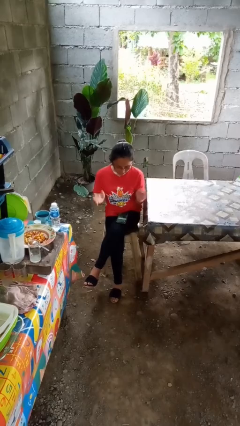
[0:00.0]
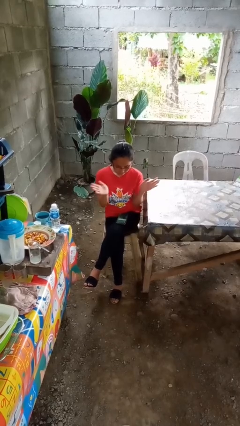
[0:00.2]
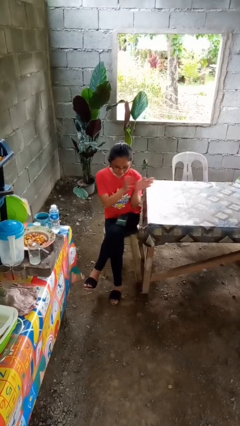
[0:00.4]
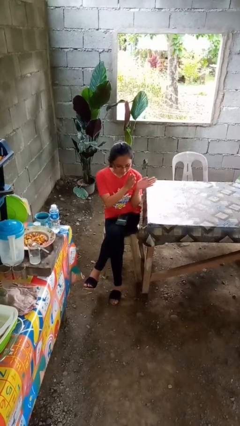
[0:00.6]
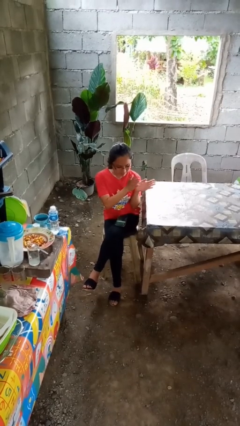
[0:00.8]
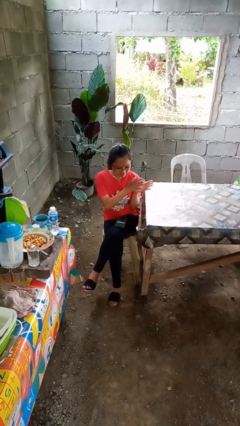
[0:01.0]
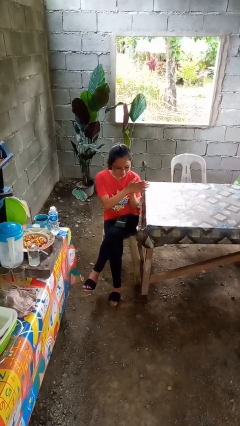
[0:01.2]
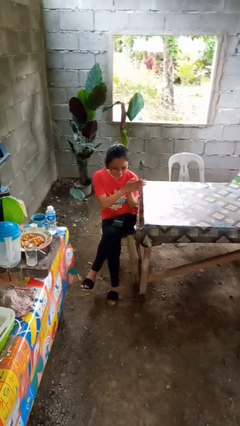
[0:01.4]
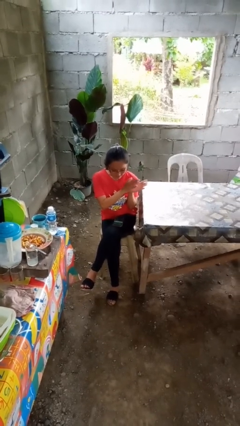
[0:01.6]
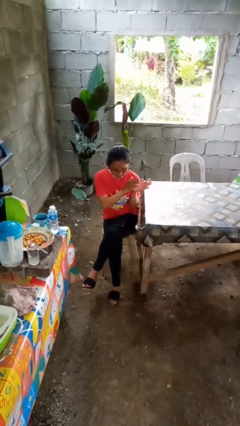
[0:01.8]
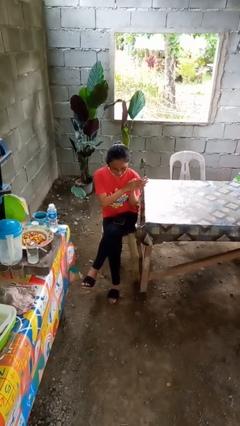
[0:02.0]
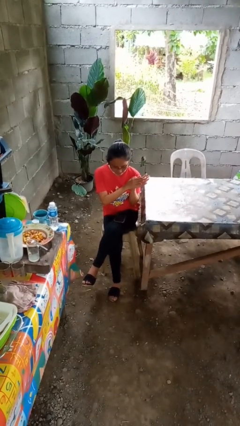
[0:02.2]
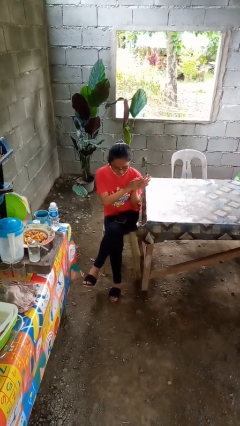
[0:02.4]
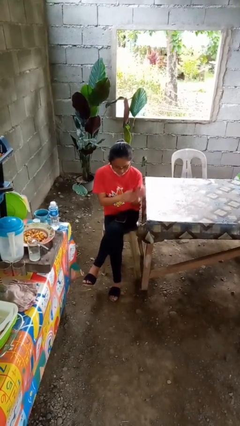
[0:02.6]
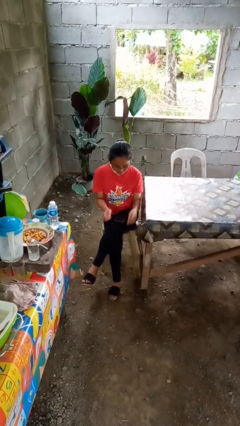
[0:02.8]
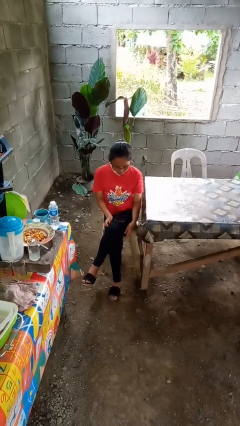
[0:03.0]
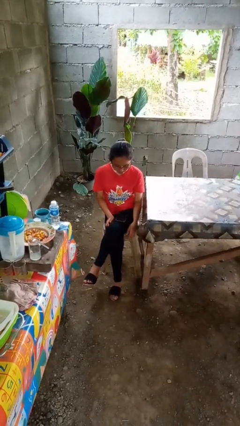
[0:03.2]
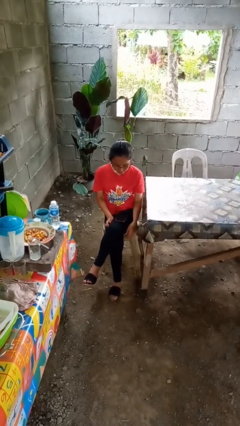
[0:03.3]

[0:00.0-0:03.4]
person claps hands

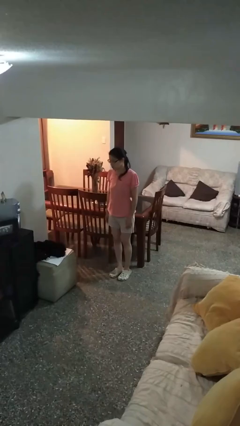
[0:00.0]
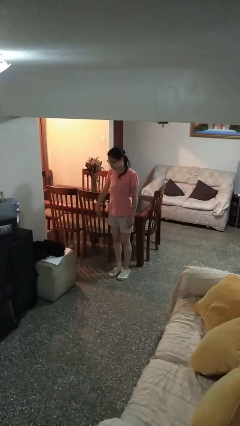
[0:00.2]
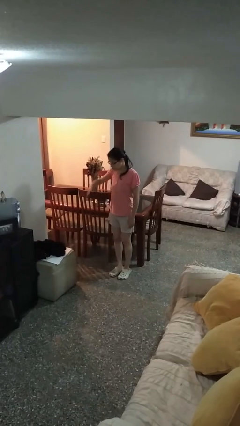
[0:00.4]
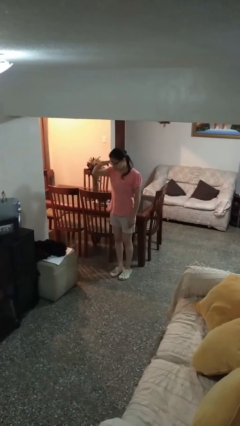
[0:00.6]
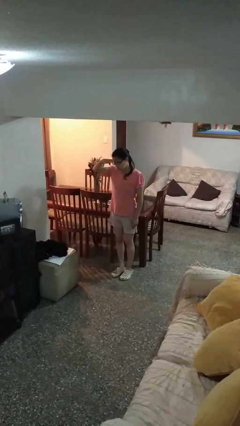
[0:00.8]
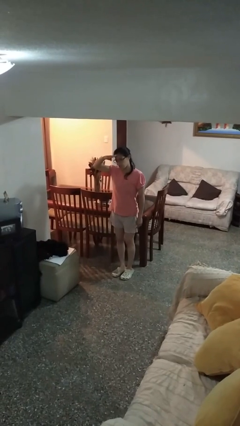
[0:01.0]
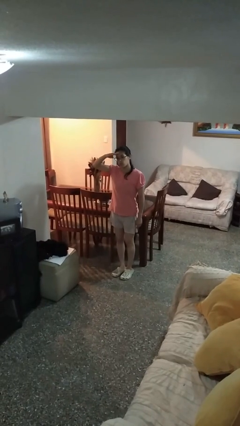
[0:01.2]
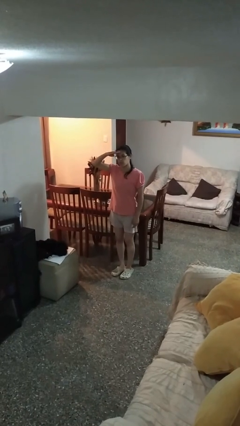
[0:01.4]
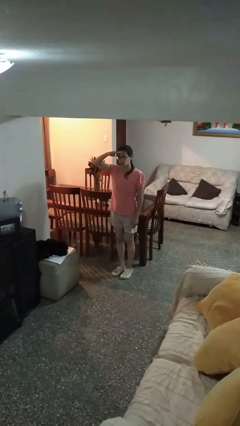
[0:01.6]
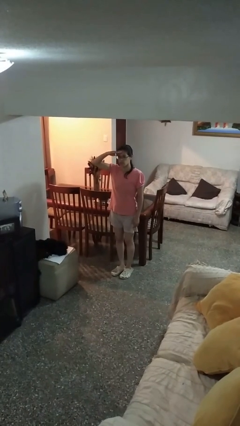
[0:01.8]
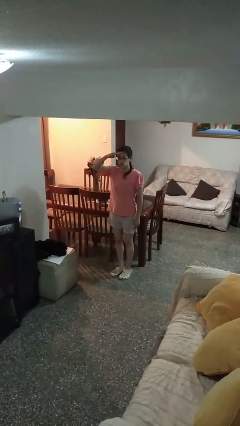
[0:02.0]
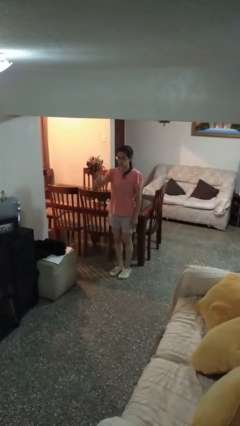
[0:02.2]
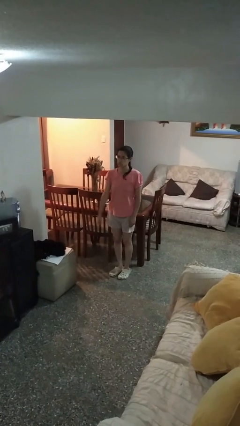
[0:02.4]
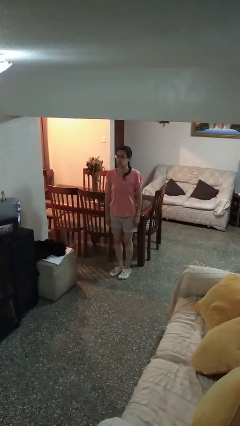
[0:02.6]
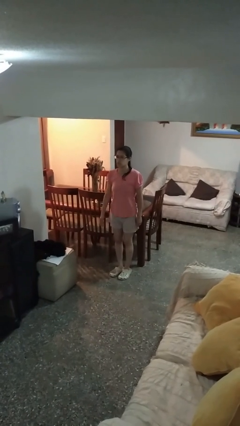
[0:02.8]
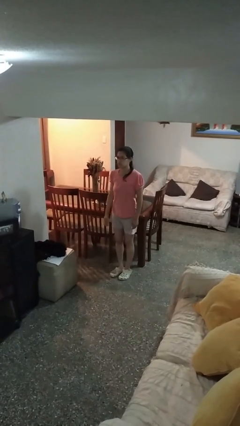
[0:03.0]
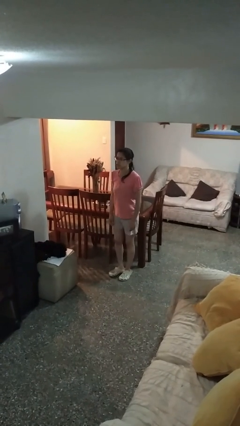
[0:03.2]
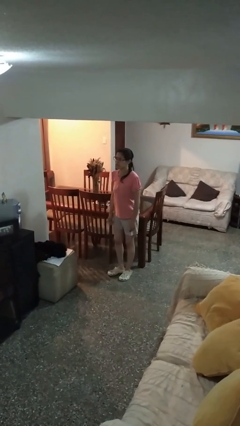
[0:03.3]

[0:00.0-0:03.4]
person salutes

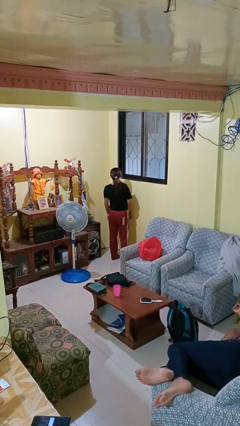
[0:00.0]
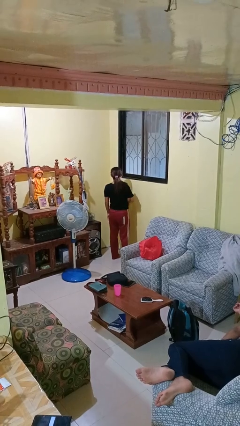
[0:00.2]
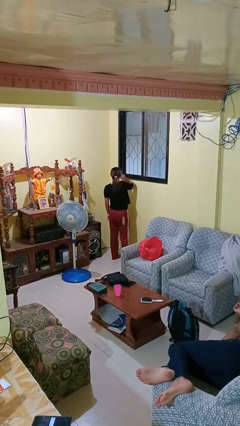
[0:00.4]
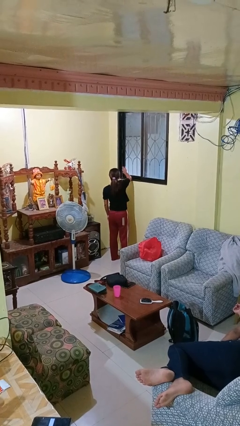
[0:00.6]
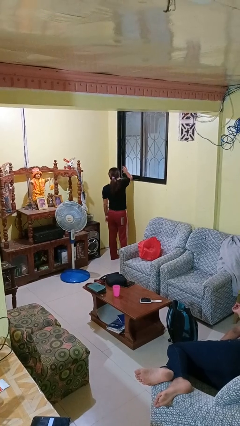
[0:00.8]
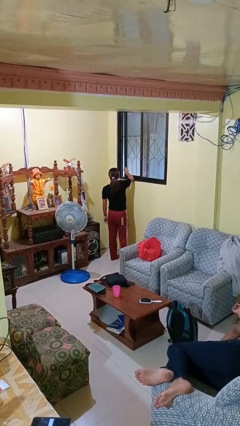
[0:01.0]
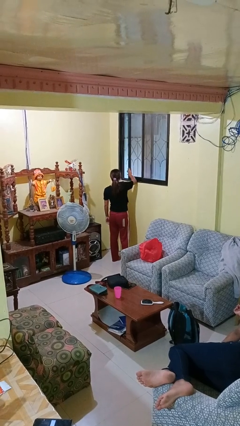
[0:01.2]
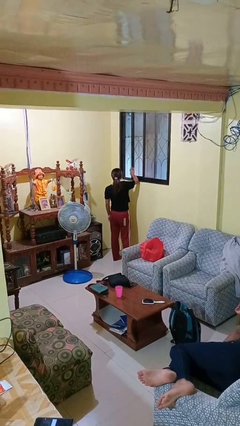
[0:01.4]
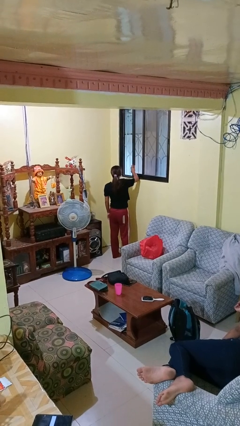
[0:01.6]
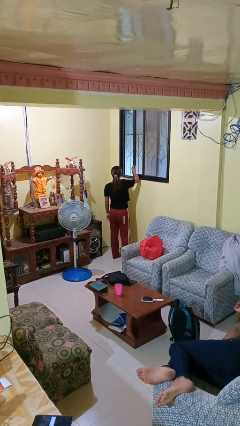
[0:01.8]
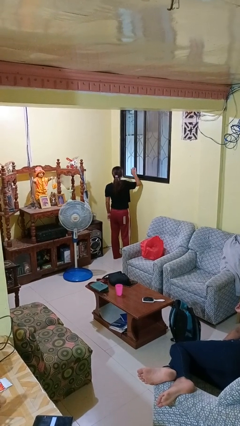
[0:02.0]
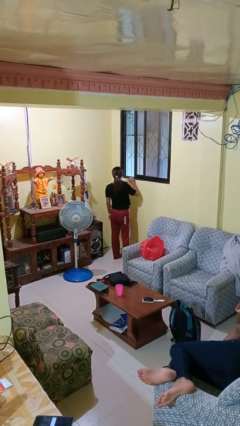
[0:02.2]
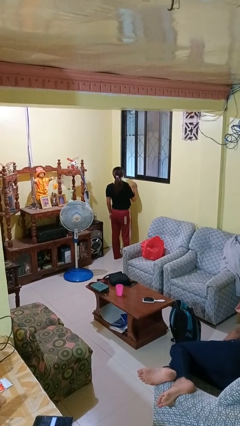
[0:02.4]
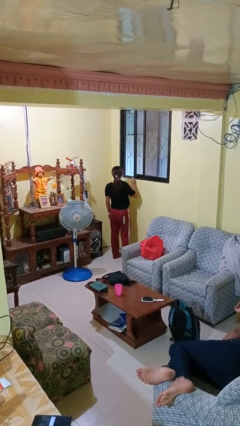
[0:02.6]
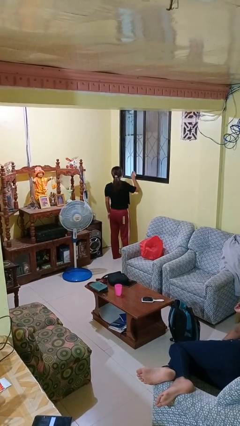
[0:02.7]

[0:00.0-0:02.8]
person opens home window

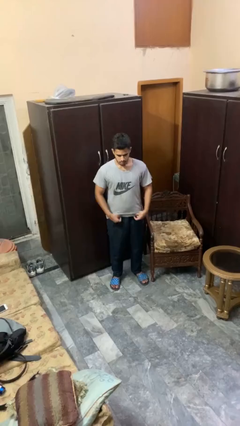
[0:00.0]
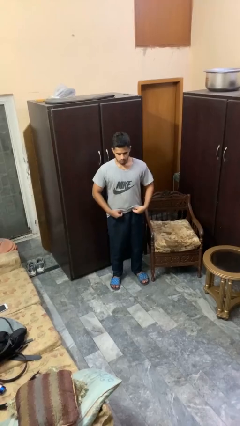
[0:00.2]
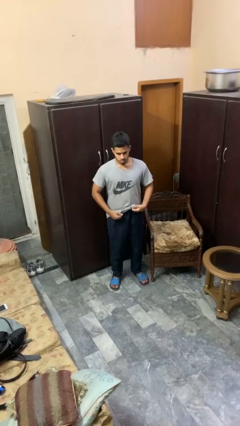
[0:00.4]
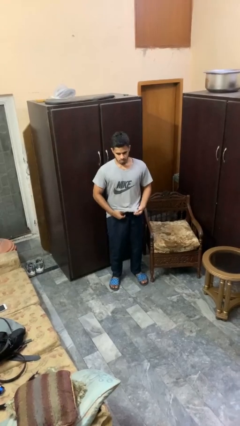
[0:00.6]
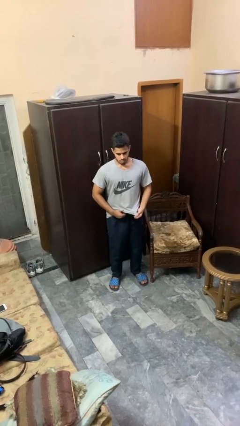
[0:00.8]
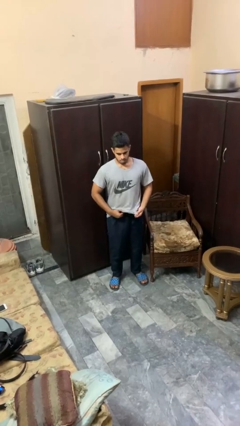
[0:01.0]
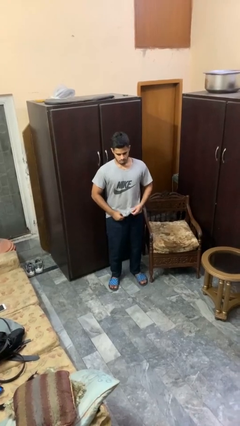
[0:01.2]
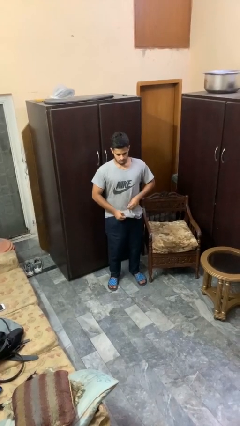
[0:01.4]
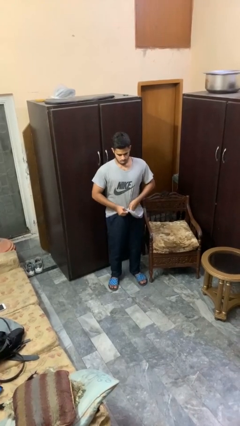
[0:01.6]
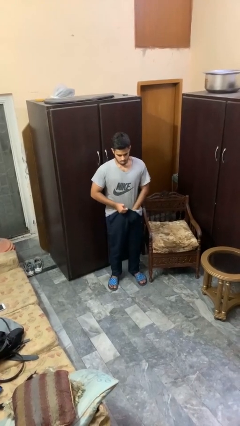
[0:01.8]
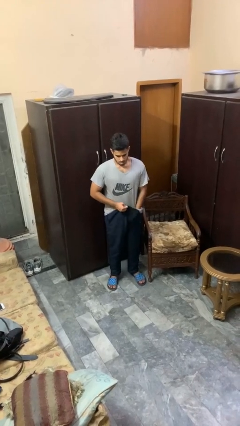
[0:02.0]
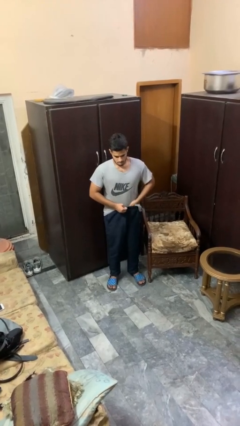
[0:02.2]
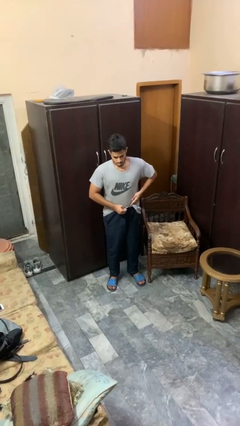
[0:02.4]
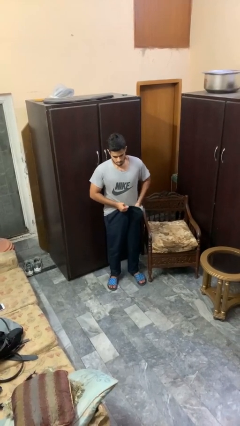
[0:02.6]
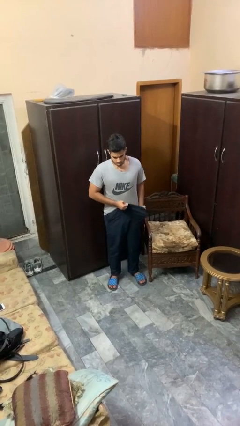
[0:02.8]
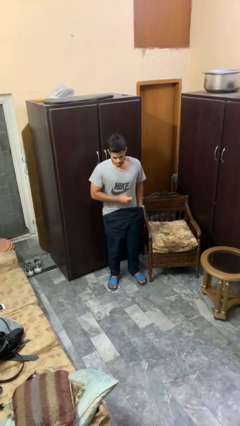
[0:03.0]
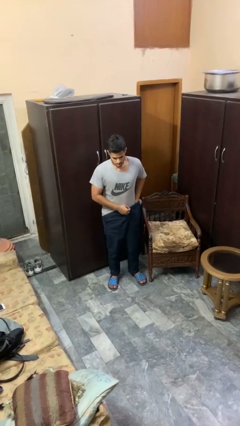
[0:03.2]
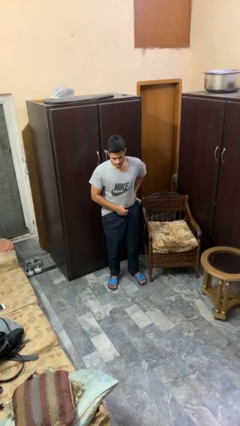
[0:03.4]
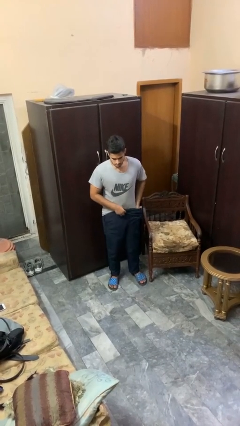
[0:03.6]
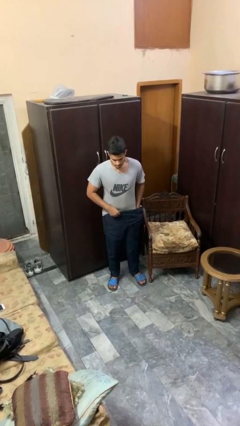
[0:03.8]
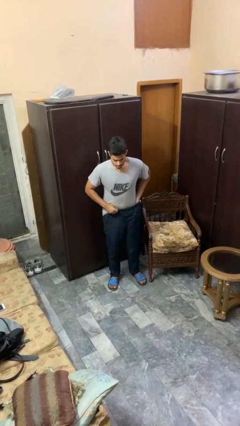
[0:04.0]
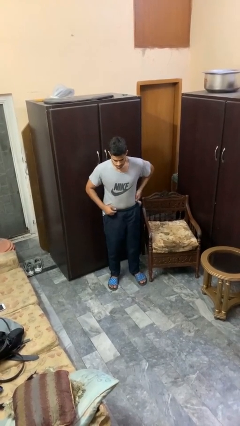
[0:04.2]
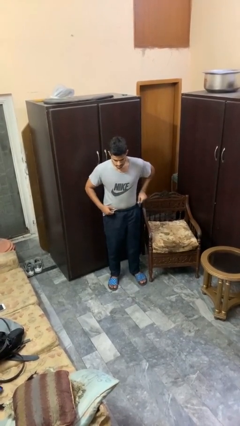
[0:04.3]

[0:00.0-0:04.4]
person tucks in shirt

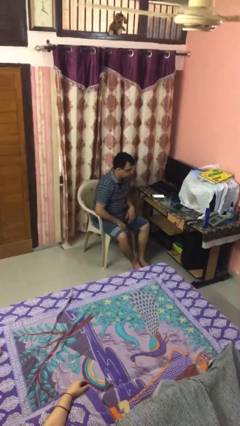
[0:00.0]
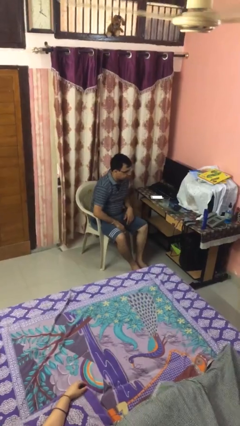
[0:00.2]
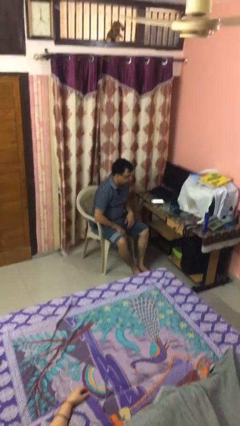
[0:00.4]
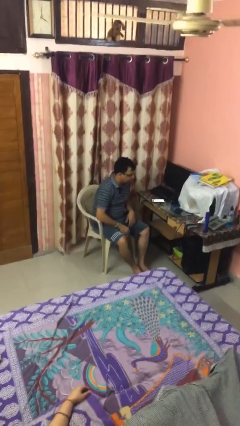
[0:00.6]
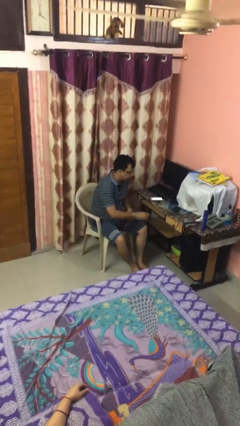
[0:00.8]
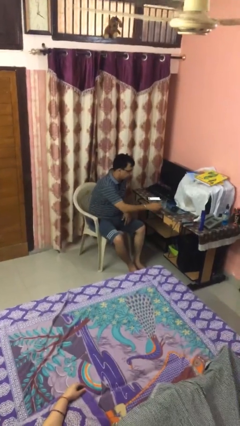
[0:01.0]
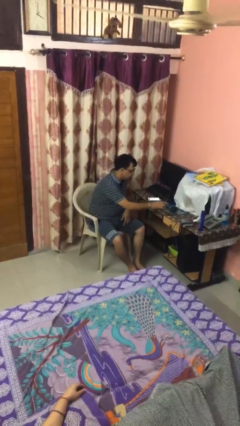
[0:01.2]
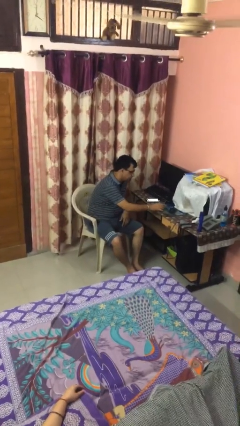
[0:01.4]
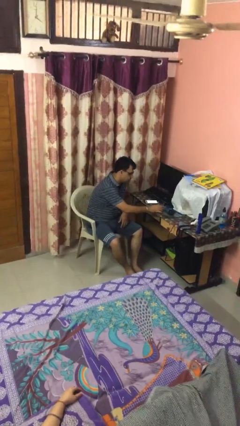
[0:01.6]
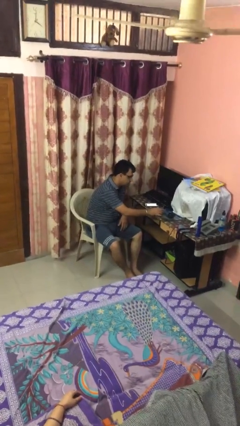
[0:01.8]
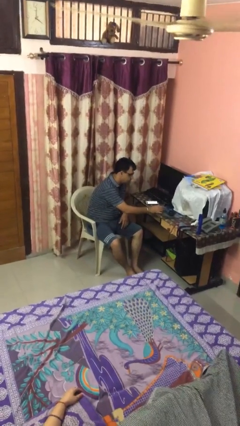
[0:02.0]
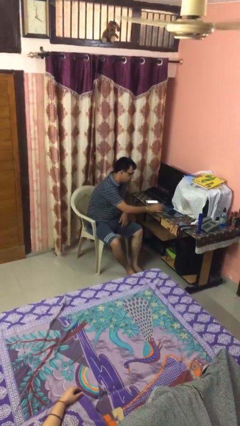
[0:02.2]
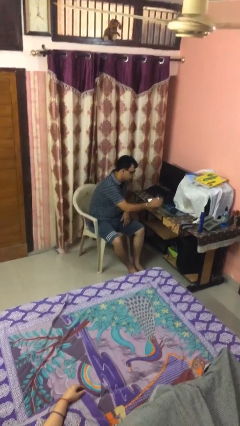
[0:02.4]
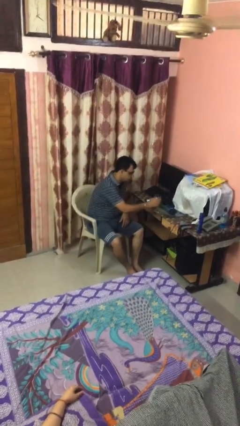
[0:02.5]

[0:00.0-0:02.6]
person picks up object from table

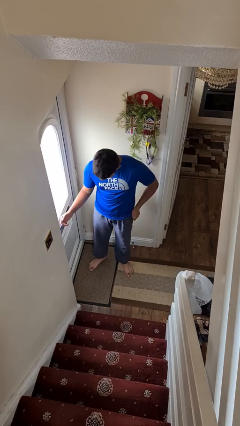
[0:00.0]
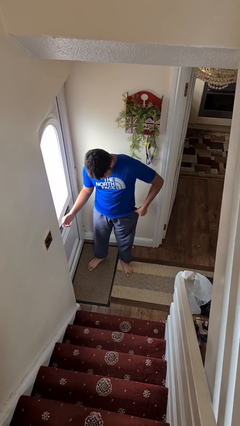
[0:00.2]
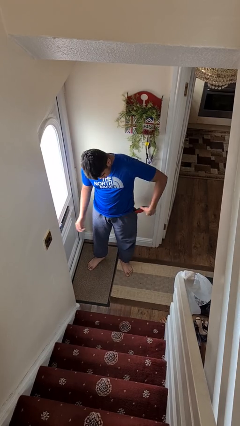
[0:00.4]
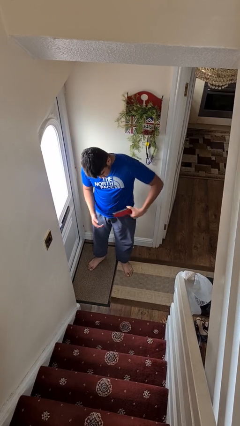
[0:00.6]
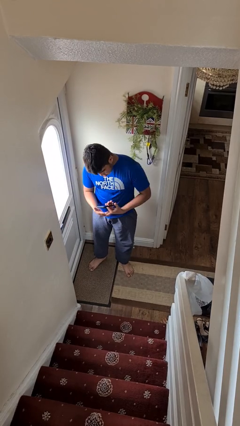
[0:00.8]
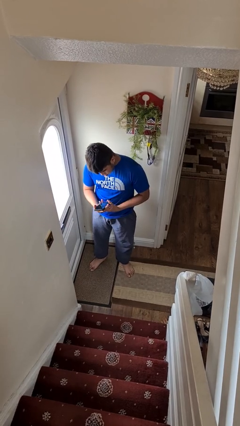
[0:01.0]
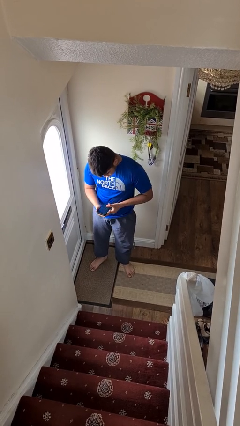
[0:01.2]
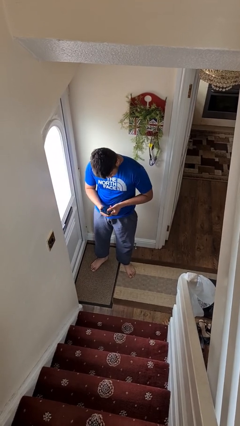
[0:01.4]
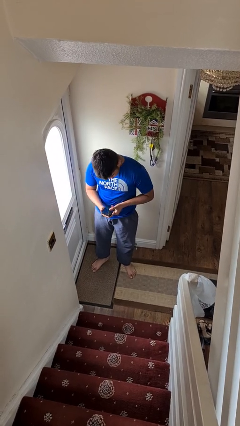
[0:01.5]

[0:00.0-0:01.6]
person takes phone from pocket
